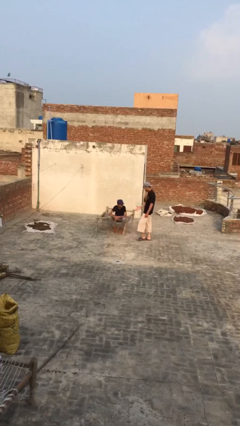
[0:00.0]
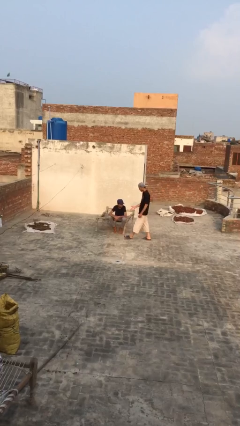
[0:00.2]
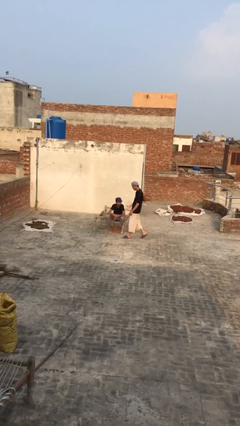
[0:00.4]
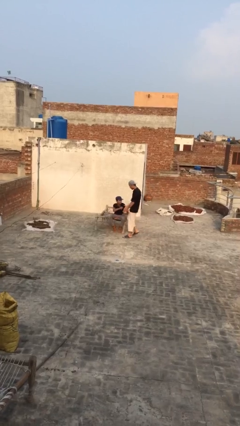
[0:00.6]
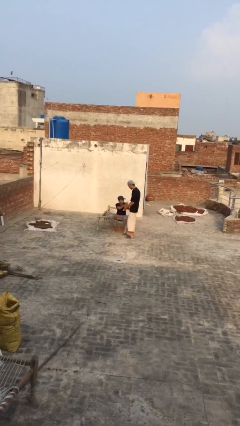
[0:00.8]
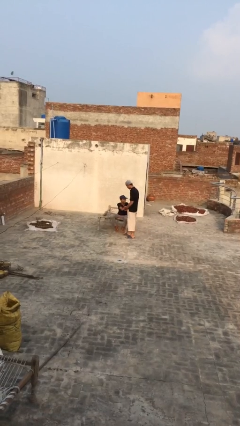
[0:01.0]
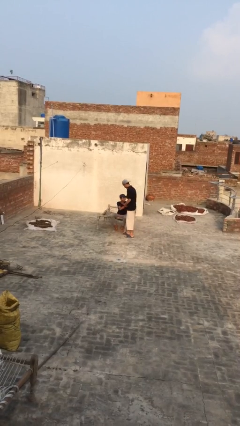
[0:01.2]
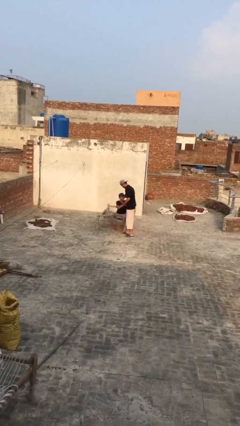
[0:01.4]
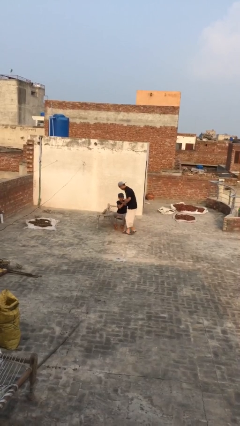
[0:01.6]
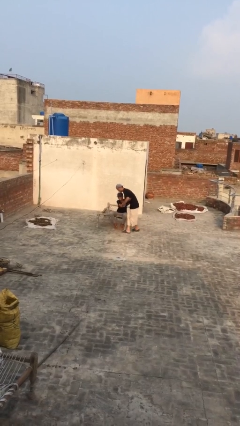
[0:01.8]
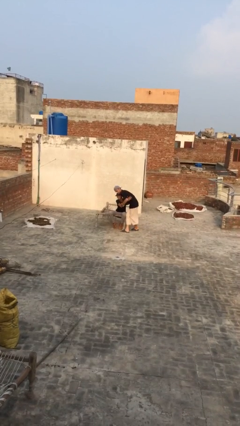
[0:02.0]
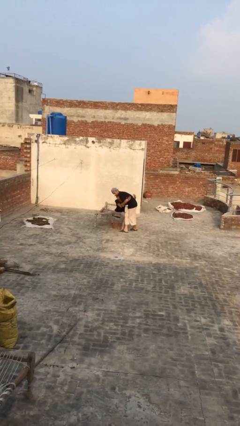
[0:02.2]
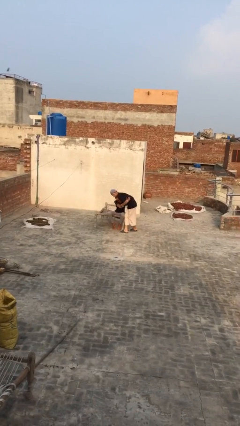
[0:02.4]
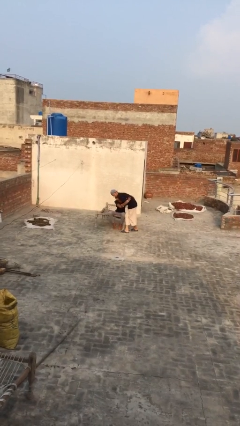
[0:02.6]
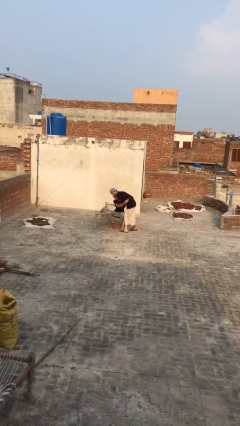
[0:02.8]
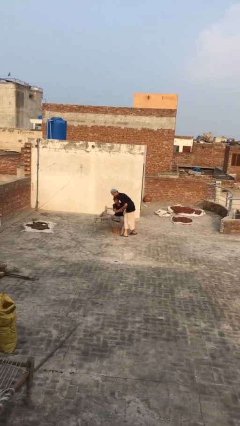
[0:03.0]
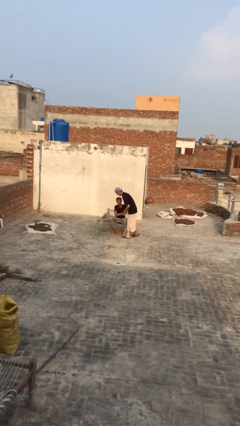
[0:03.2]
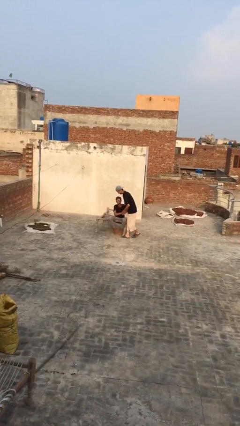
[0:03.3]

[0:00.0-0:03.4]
person embraces person

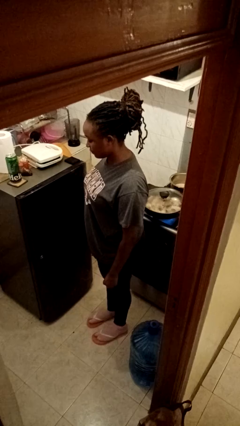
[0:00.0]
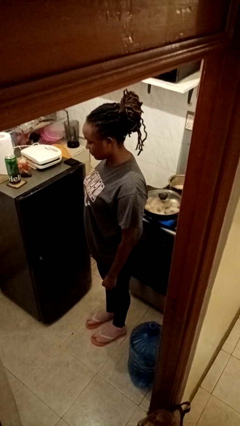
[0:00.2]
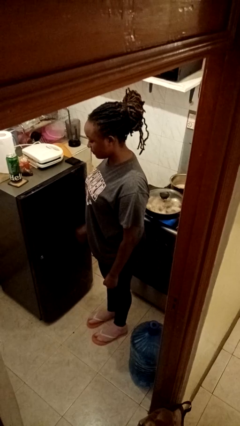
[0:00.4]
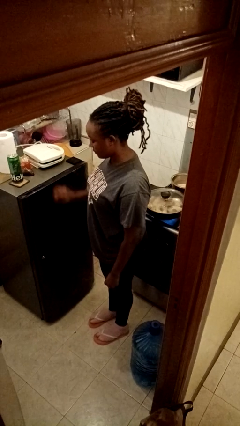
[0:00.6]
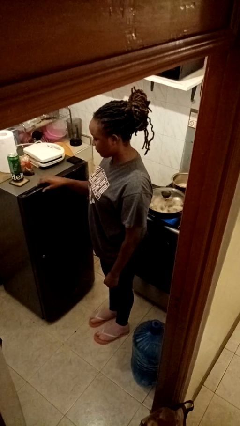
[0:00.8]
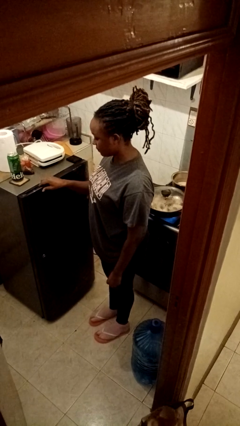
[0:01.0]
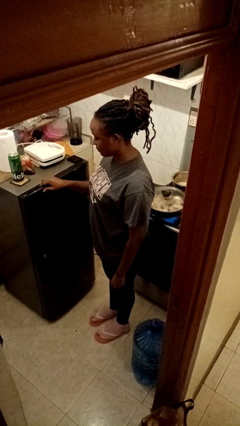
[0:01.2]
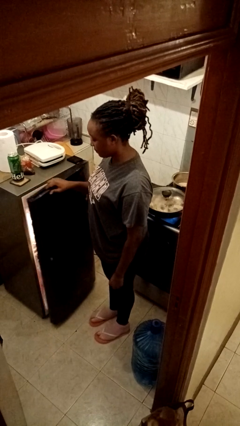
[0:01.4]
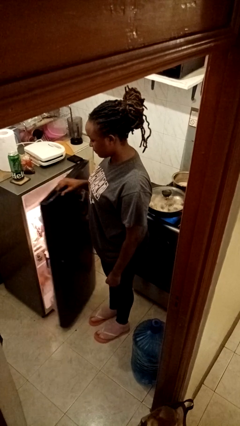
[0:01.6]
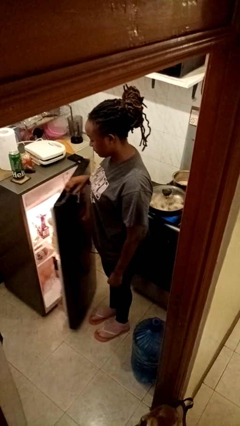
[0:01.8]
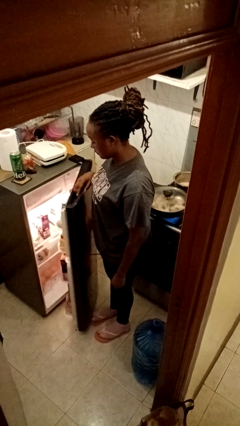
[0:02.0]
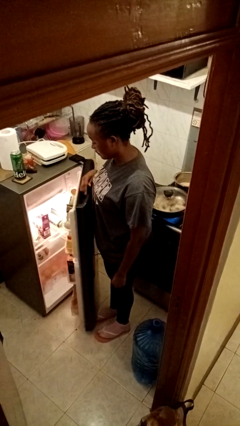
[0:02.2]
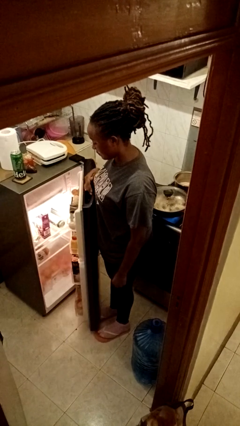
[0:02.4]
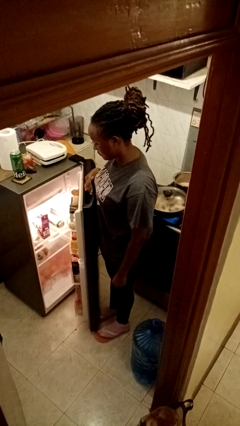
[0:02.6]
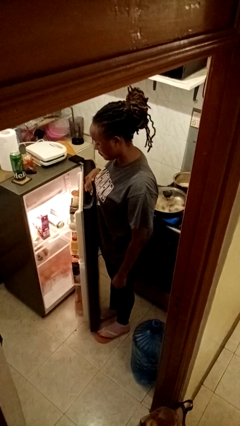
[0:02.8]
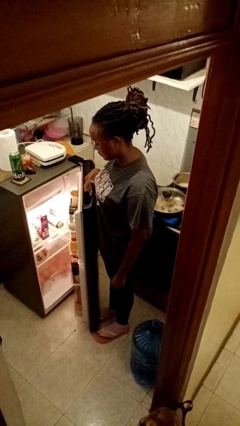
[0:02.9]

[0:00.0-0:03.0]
person opens refrigerator

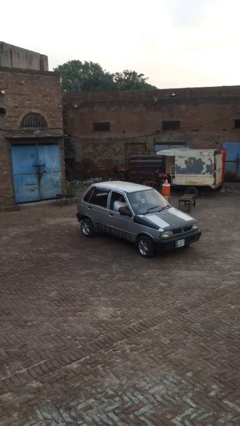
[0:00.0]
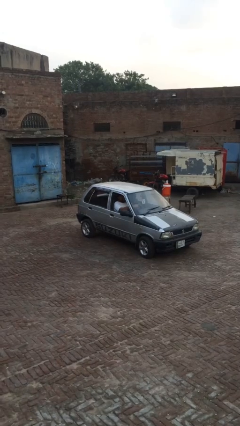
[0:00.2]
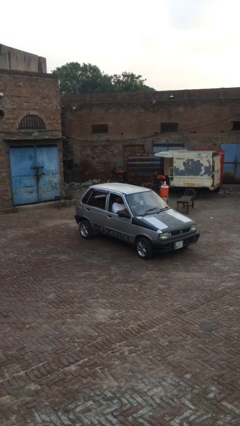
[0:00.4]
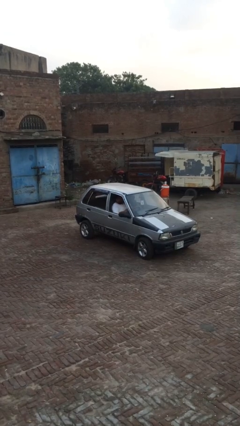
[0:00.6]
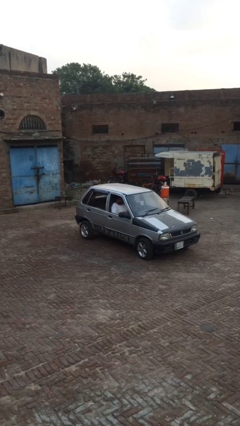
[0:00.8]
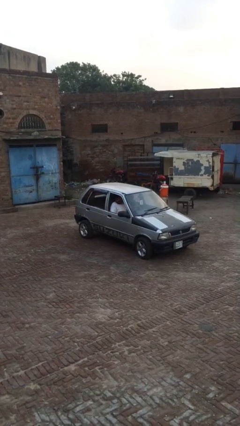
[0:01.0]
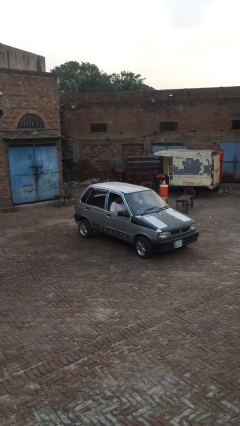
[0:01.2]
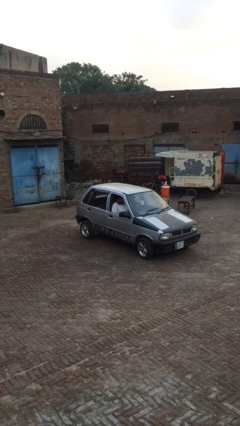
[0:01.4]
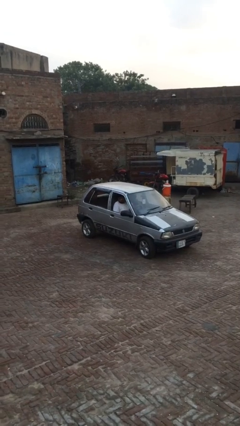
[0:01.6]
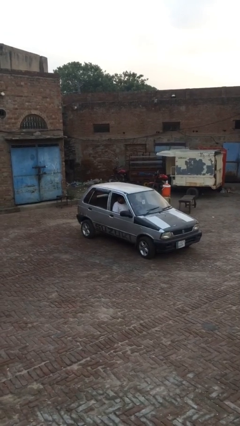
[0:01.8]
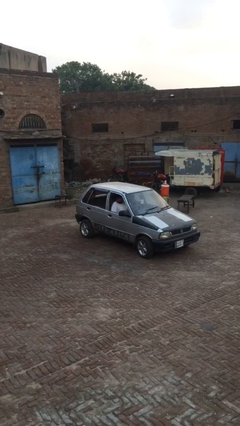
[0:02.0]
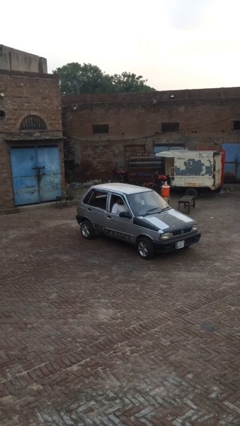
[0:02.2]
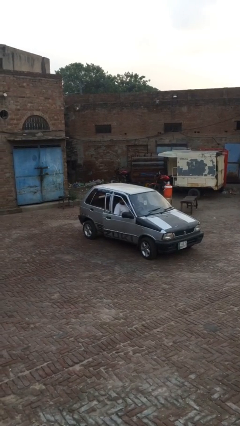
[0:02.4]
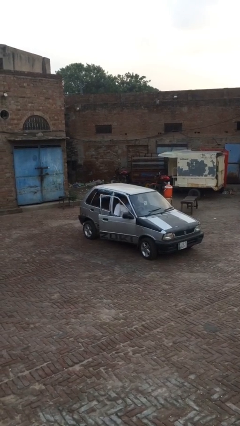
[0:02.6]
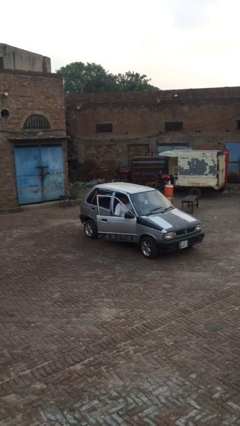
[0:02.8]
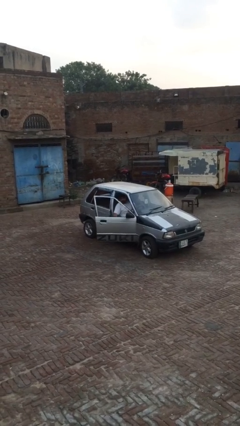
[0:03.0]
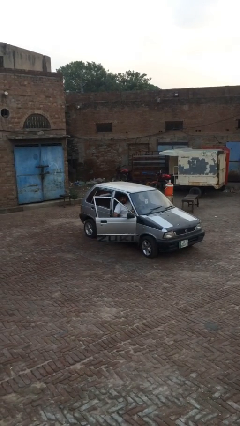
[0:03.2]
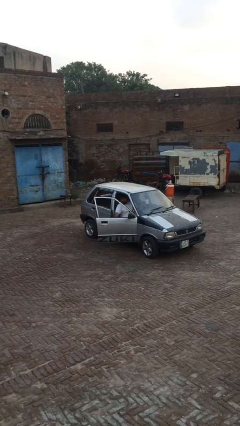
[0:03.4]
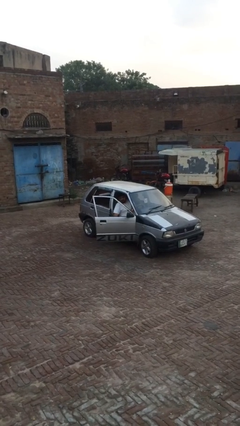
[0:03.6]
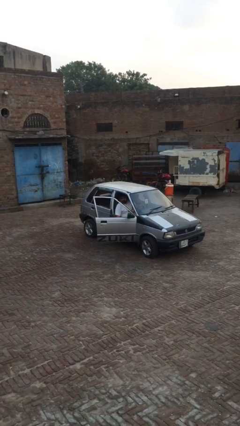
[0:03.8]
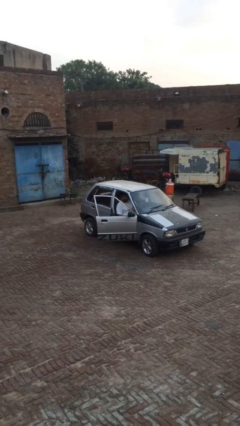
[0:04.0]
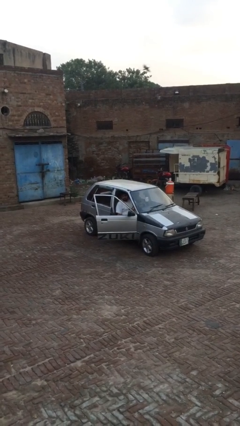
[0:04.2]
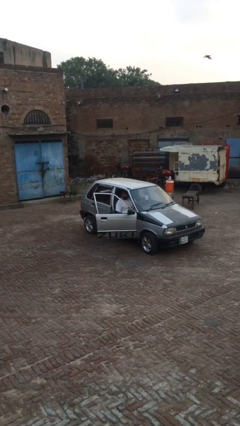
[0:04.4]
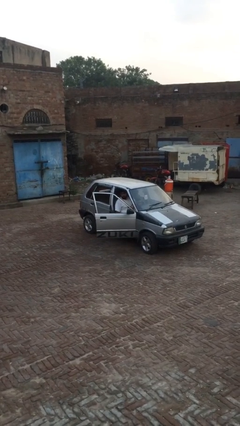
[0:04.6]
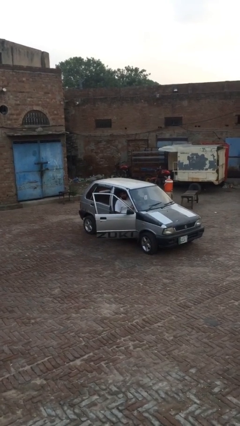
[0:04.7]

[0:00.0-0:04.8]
person opens car door

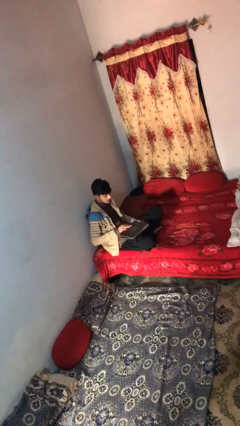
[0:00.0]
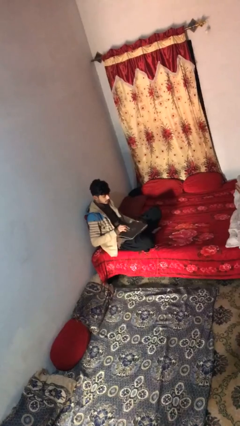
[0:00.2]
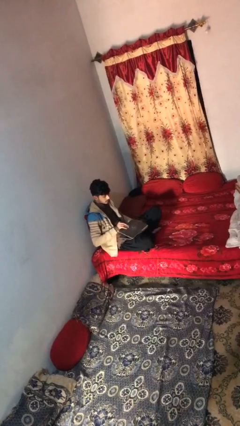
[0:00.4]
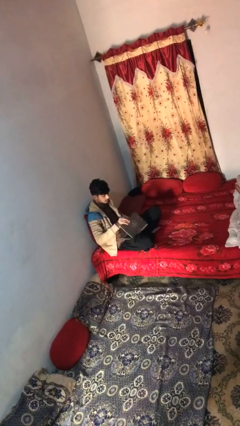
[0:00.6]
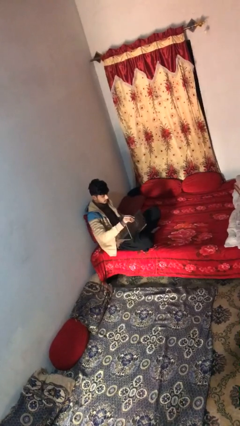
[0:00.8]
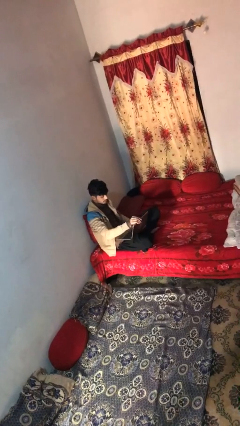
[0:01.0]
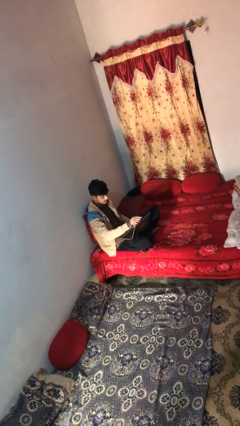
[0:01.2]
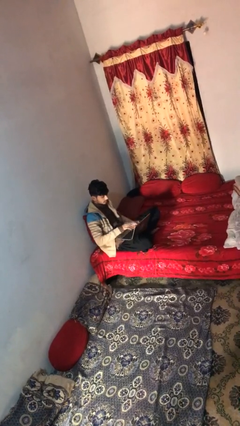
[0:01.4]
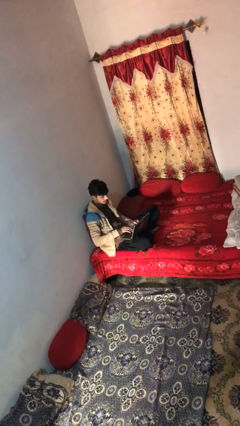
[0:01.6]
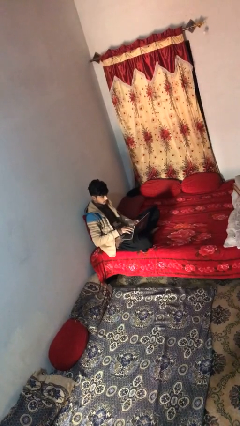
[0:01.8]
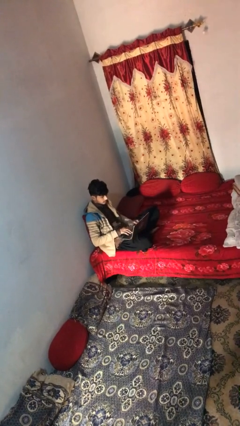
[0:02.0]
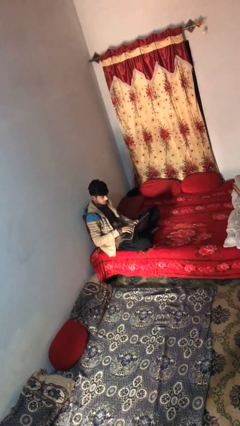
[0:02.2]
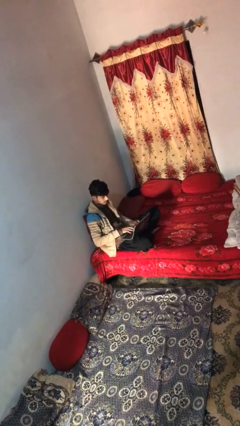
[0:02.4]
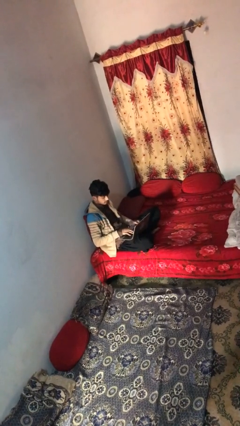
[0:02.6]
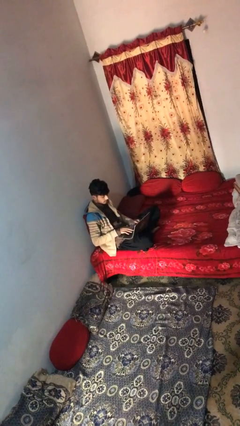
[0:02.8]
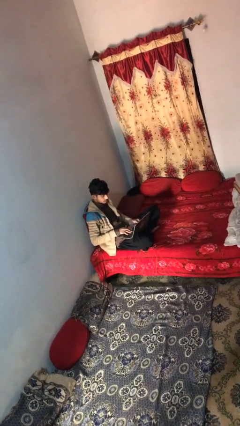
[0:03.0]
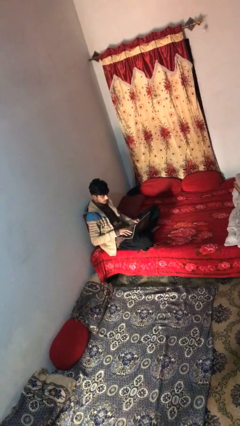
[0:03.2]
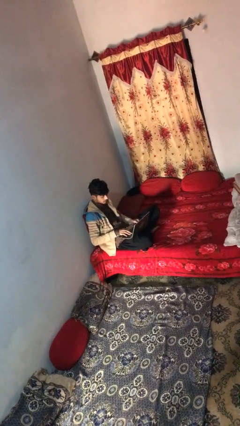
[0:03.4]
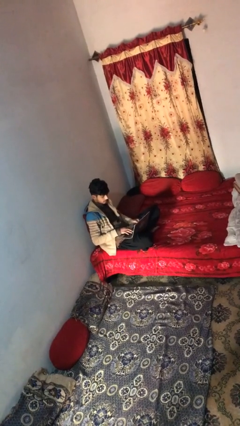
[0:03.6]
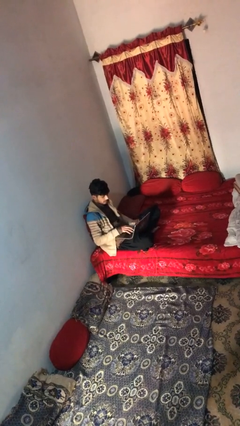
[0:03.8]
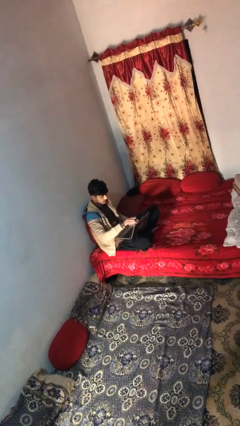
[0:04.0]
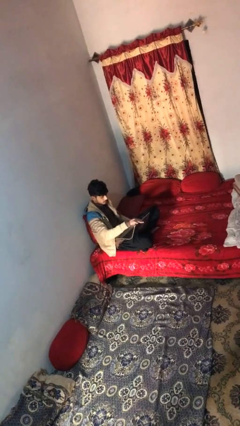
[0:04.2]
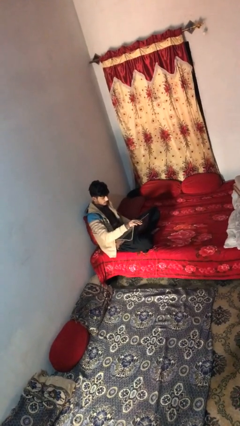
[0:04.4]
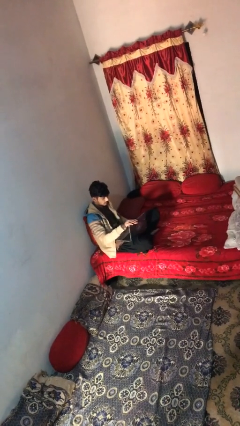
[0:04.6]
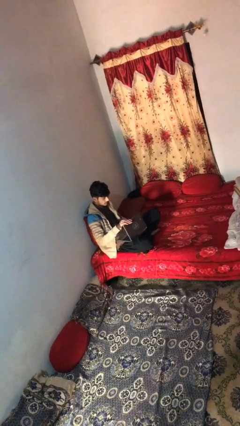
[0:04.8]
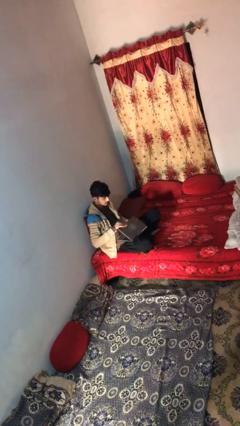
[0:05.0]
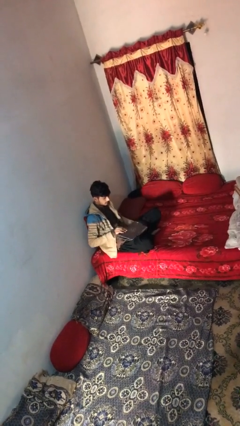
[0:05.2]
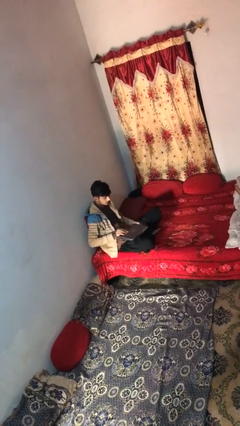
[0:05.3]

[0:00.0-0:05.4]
person interacts with laptop

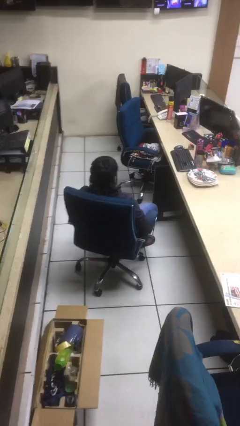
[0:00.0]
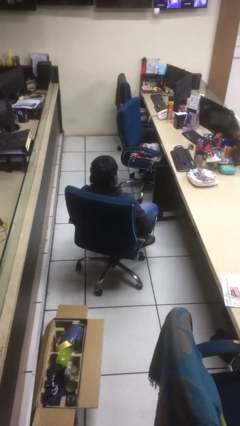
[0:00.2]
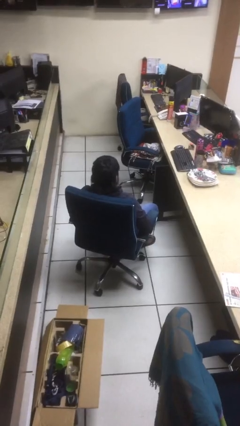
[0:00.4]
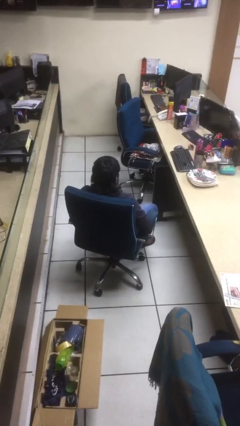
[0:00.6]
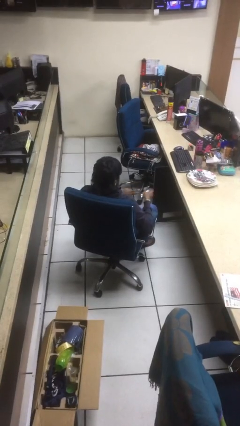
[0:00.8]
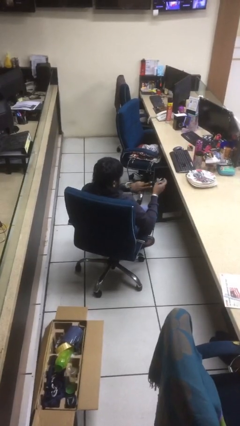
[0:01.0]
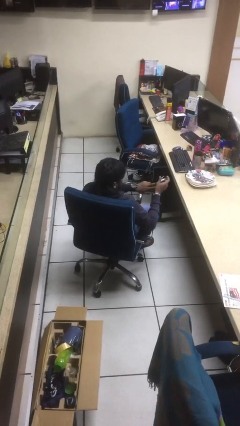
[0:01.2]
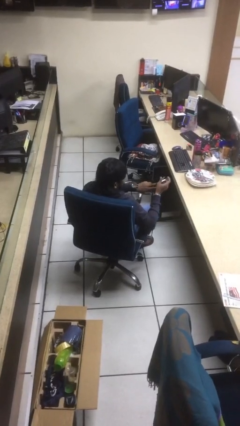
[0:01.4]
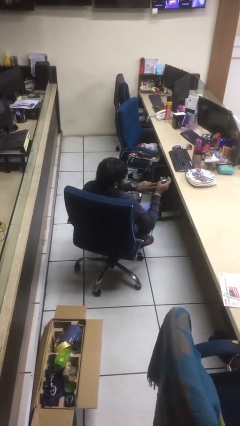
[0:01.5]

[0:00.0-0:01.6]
person clips fingernails
